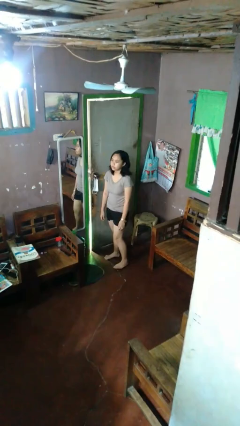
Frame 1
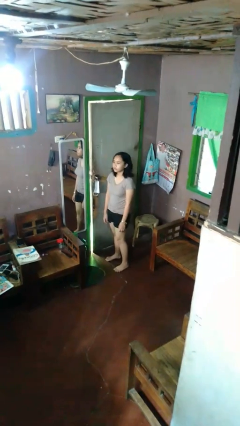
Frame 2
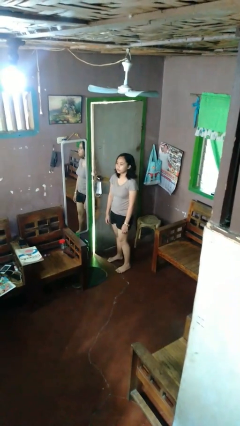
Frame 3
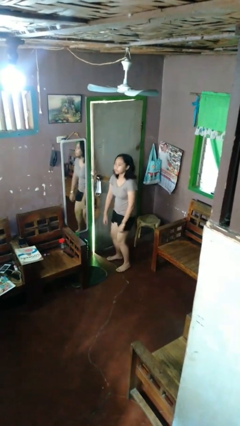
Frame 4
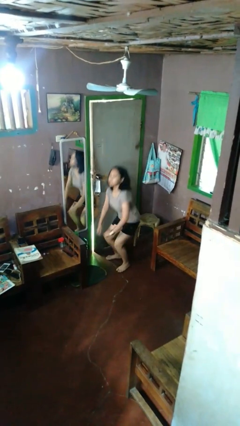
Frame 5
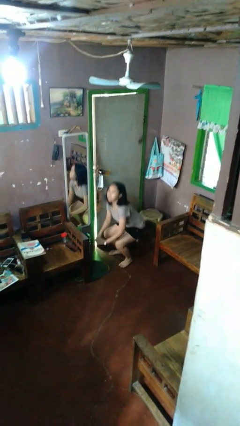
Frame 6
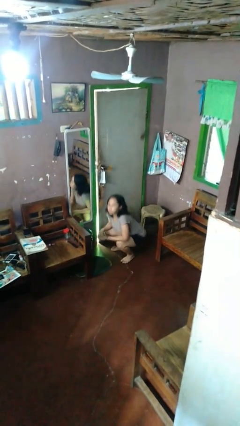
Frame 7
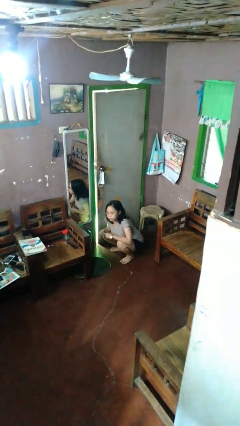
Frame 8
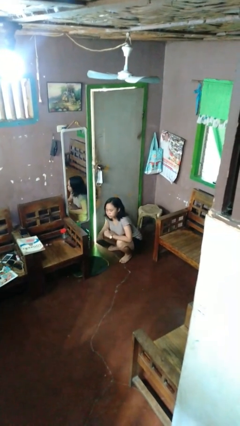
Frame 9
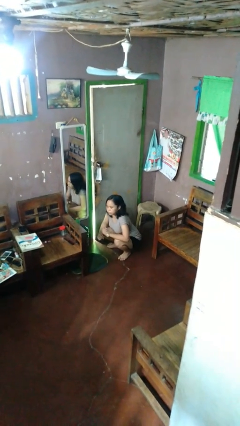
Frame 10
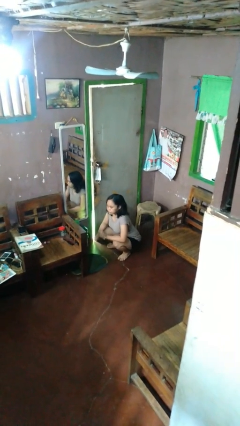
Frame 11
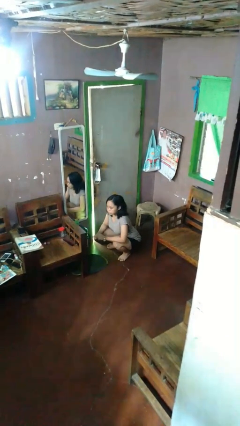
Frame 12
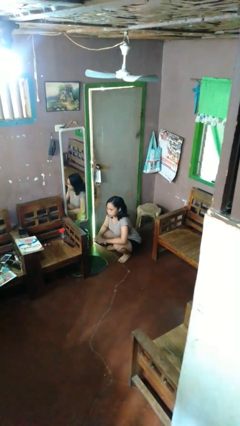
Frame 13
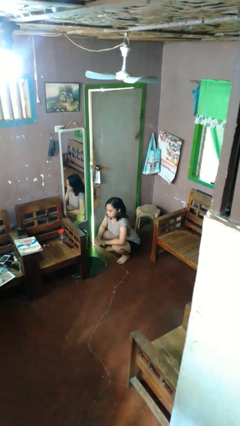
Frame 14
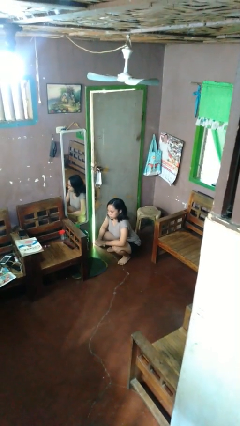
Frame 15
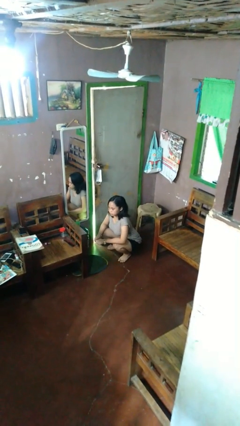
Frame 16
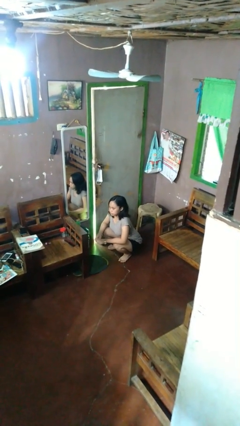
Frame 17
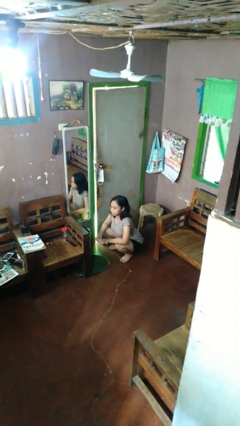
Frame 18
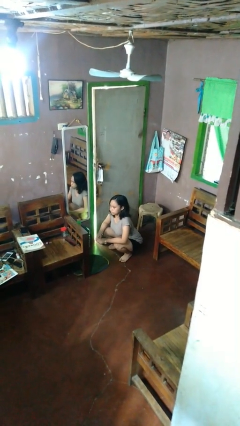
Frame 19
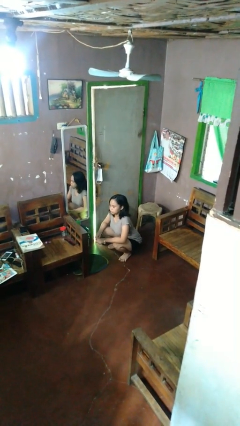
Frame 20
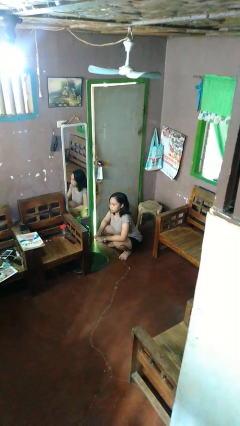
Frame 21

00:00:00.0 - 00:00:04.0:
person squats

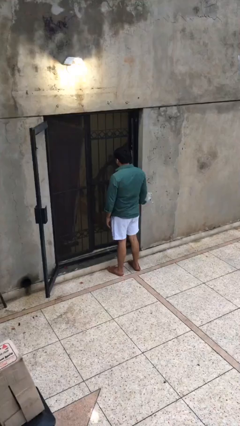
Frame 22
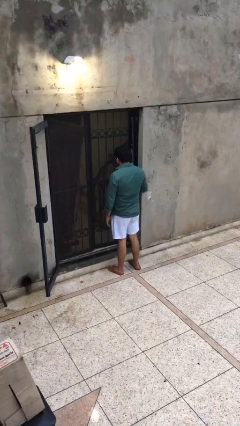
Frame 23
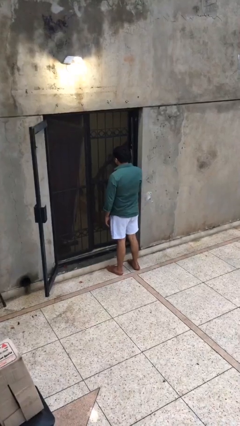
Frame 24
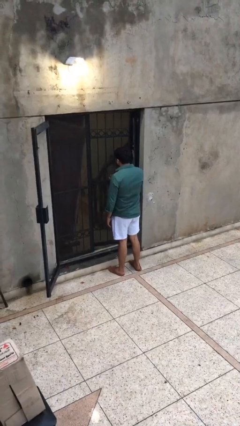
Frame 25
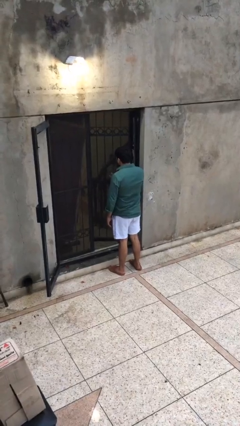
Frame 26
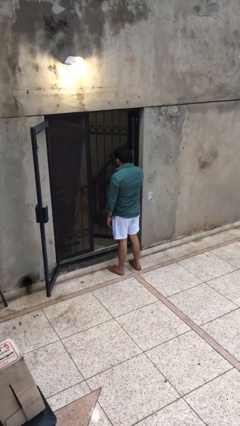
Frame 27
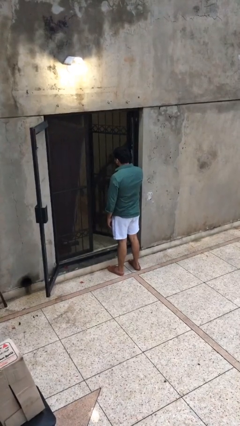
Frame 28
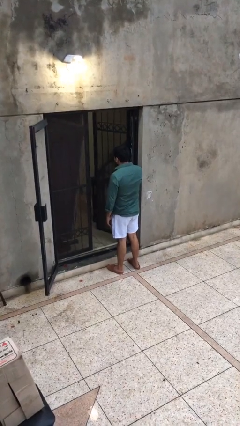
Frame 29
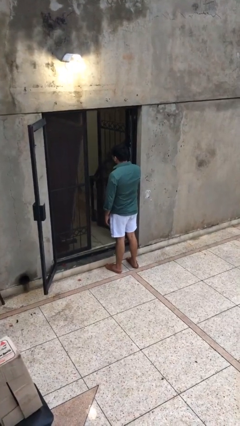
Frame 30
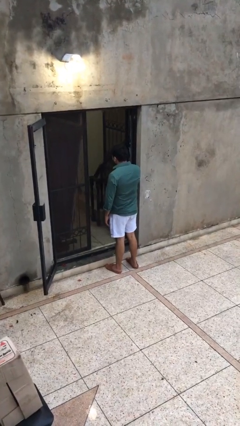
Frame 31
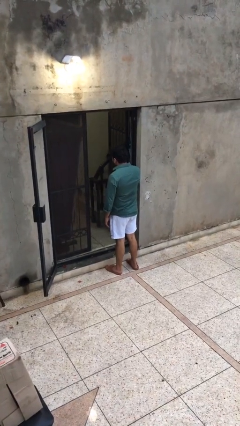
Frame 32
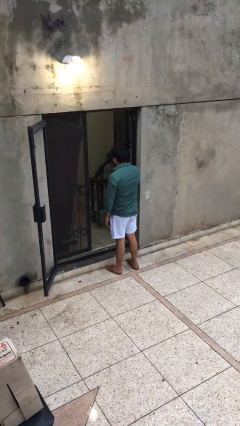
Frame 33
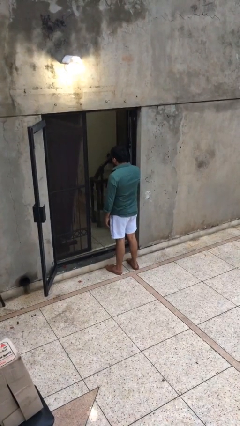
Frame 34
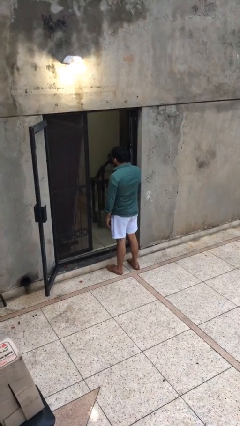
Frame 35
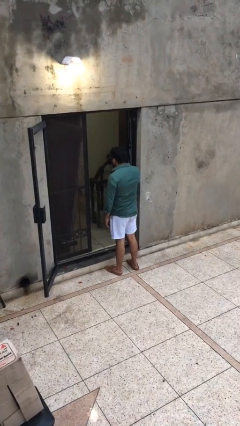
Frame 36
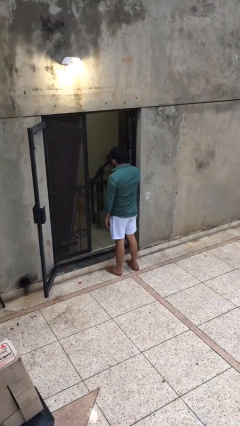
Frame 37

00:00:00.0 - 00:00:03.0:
person opens facility door

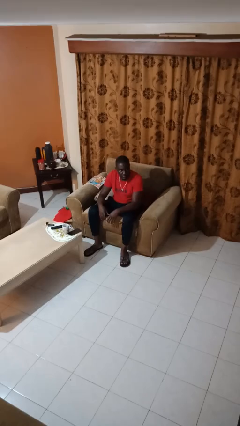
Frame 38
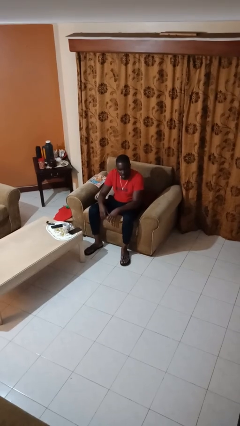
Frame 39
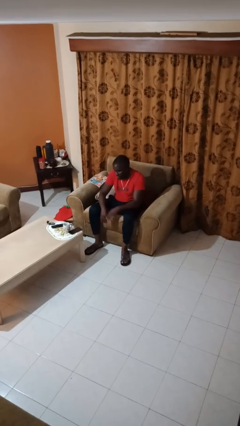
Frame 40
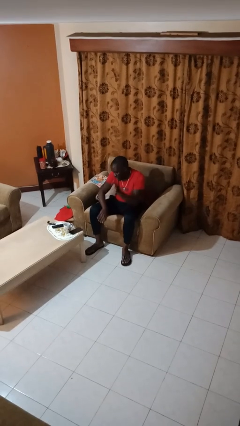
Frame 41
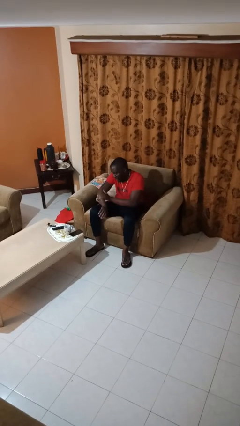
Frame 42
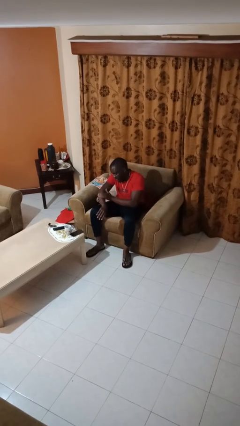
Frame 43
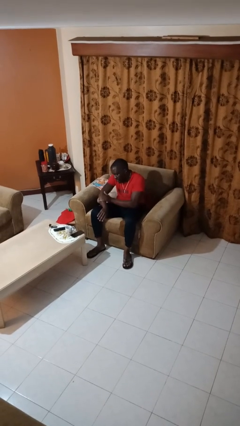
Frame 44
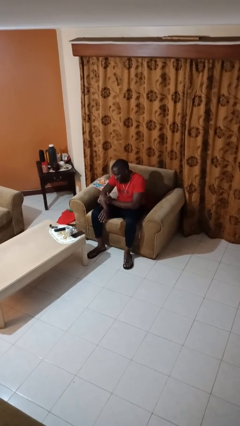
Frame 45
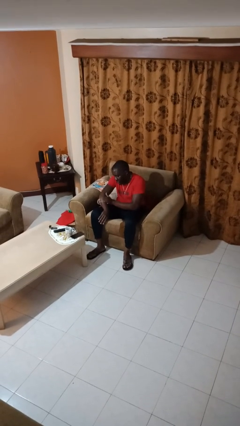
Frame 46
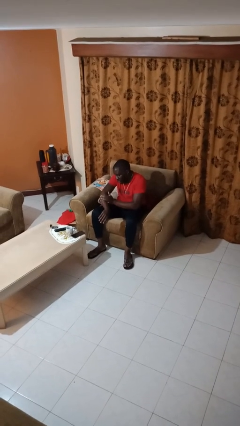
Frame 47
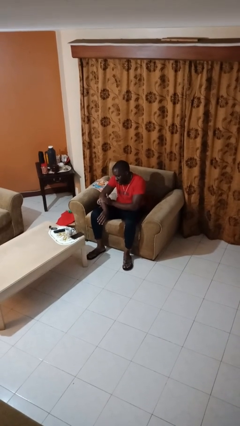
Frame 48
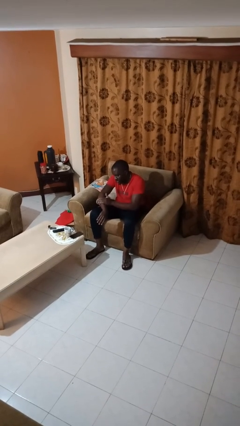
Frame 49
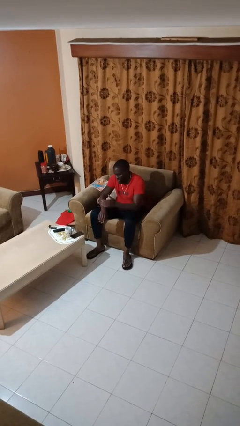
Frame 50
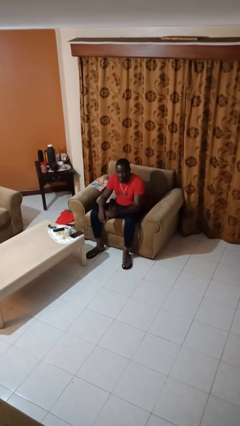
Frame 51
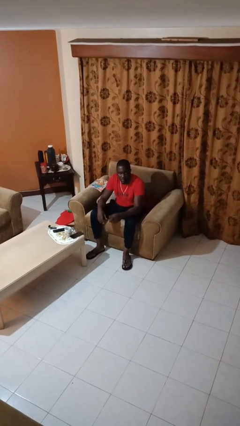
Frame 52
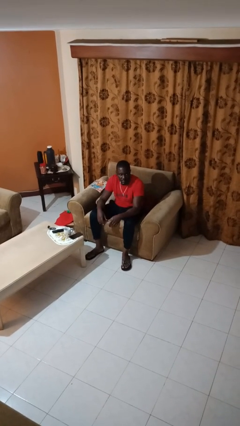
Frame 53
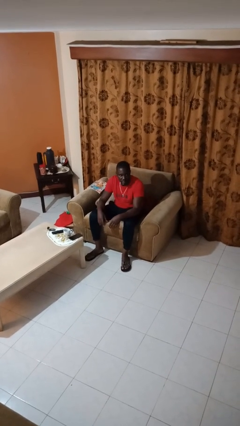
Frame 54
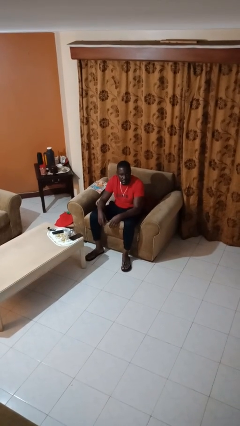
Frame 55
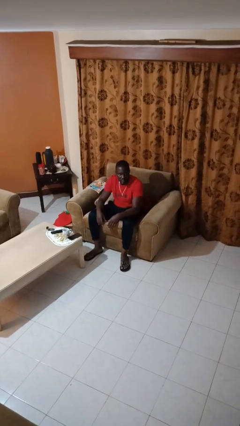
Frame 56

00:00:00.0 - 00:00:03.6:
person swats bug

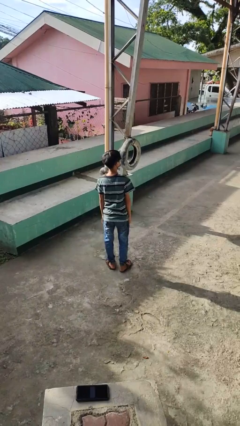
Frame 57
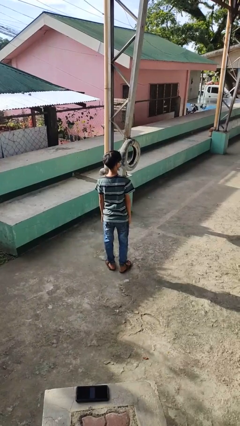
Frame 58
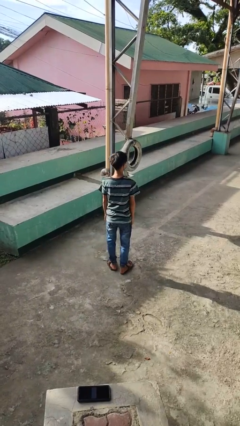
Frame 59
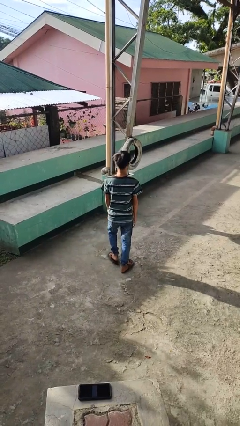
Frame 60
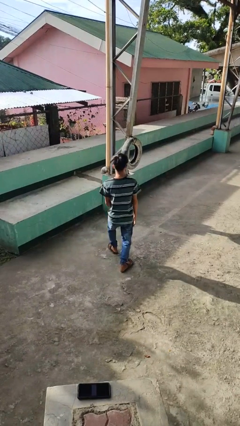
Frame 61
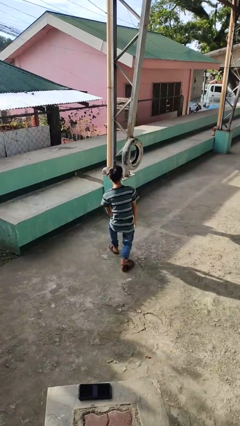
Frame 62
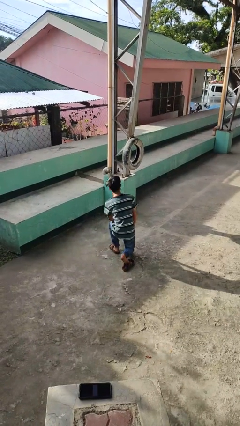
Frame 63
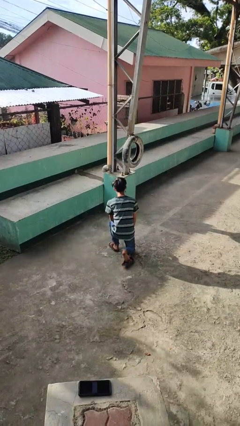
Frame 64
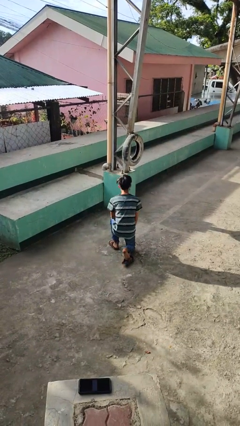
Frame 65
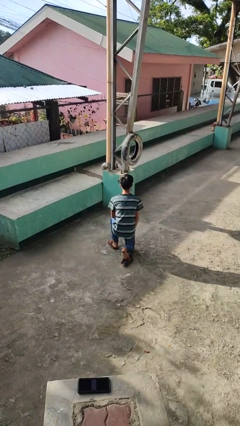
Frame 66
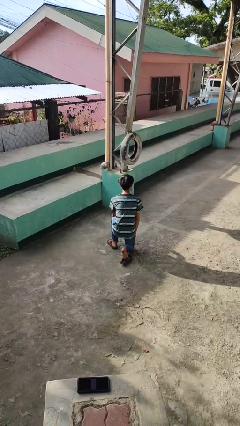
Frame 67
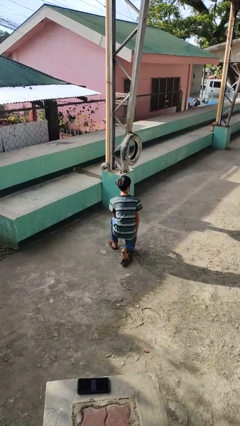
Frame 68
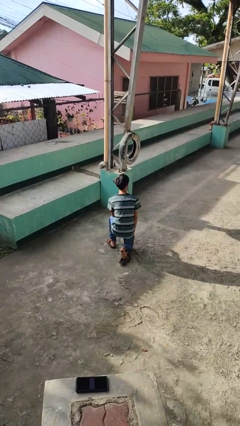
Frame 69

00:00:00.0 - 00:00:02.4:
person kneels

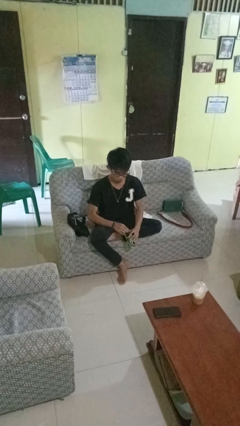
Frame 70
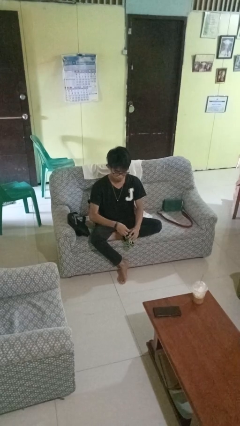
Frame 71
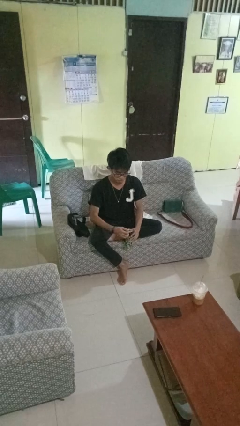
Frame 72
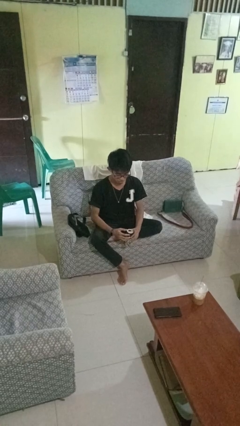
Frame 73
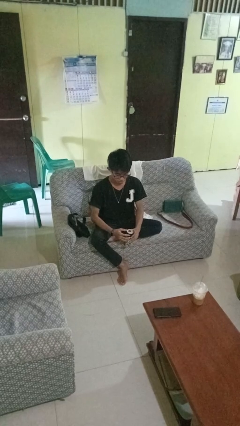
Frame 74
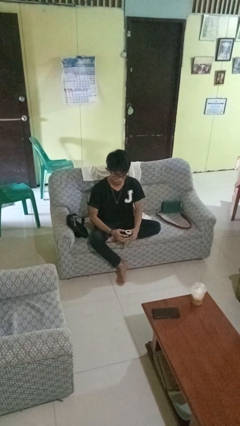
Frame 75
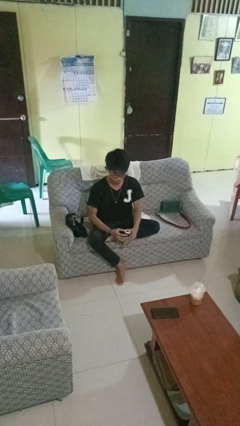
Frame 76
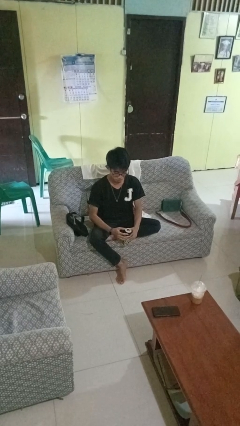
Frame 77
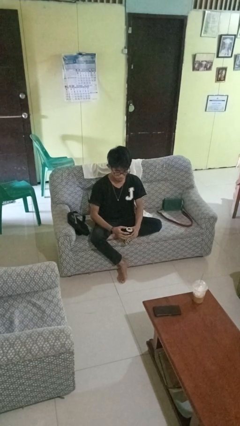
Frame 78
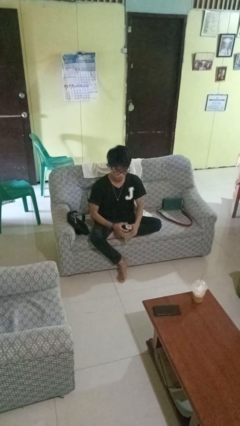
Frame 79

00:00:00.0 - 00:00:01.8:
person opens beverage can

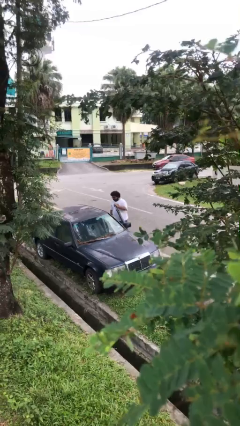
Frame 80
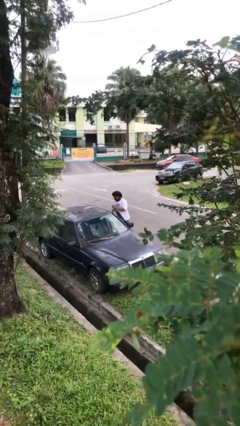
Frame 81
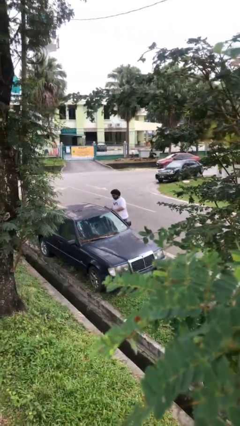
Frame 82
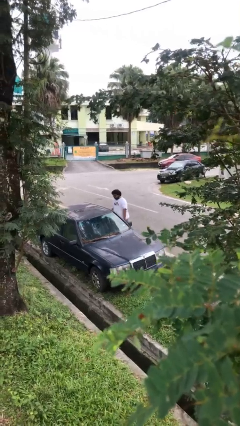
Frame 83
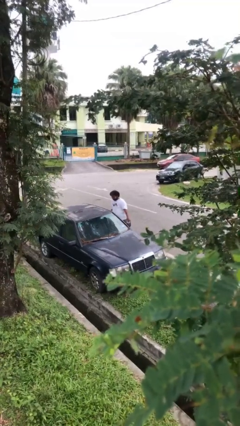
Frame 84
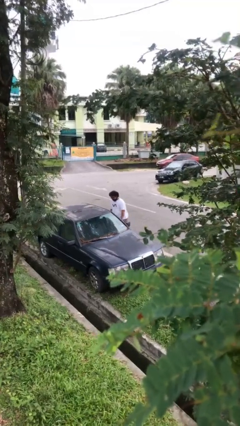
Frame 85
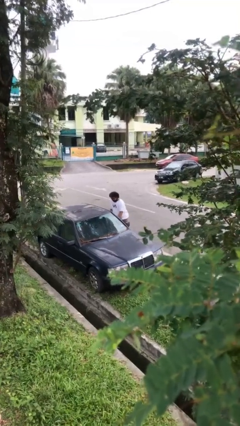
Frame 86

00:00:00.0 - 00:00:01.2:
person closes car door

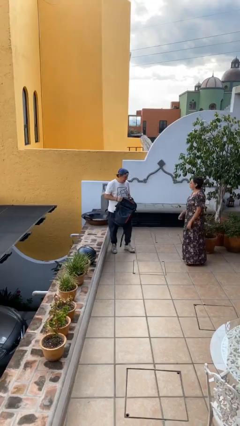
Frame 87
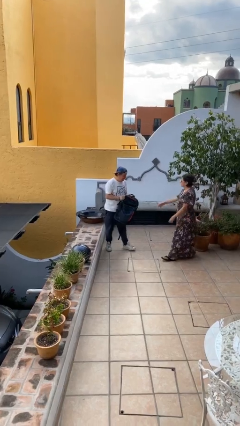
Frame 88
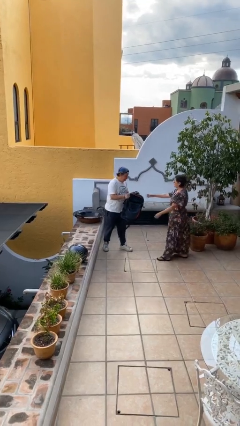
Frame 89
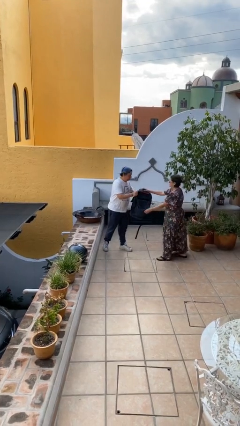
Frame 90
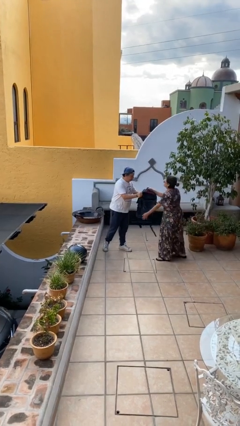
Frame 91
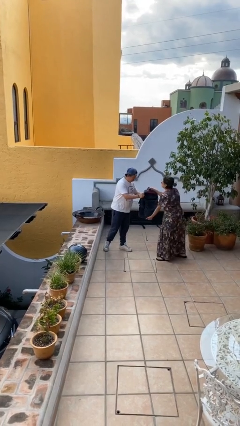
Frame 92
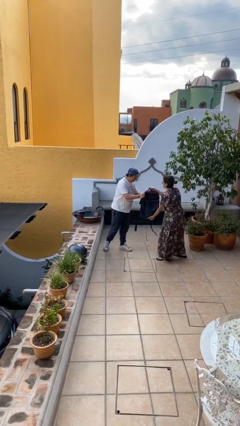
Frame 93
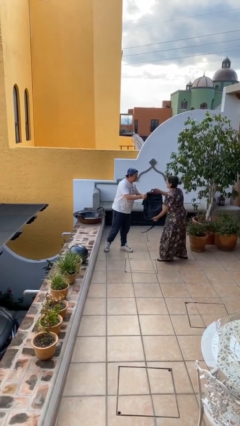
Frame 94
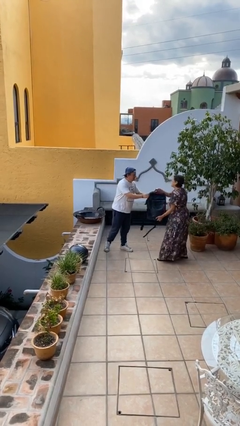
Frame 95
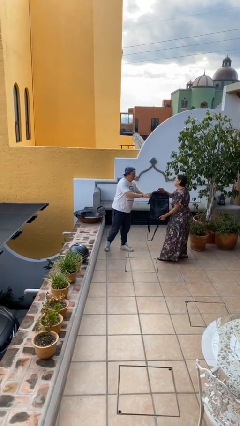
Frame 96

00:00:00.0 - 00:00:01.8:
person transfers object to person
